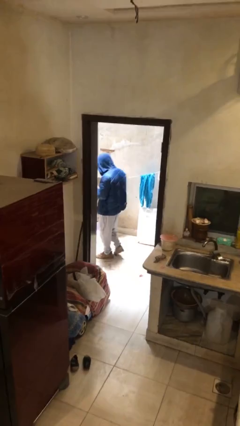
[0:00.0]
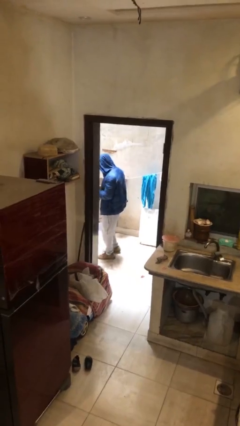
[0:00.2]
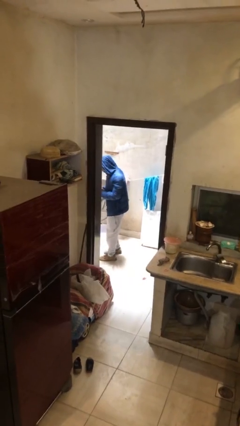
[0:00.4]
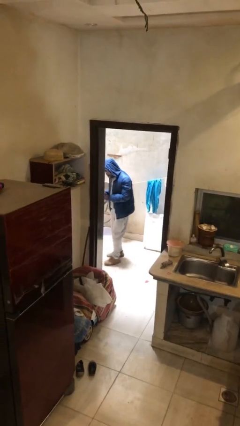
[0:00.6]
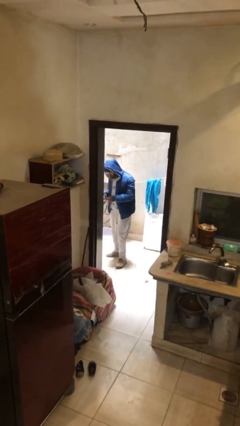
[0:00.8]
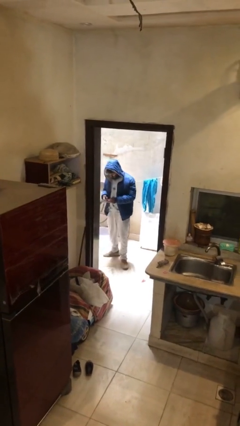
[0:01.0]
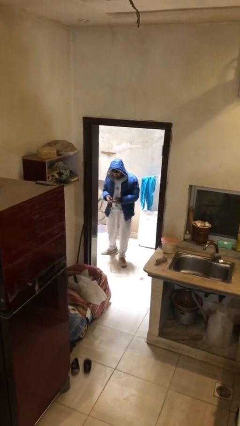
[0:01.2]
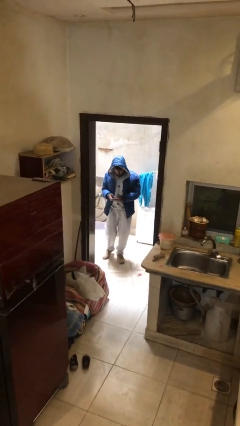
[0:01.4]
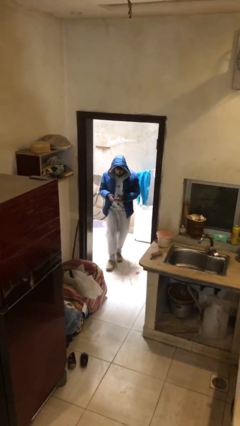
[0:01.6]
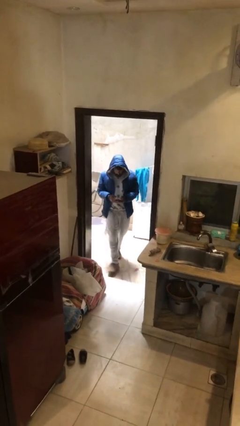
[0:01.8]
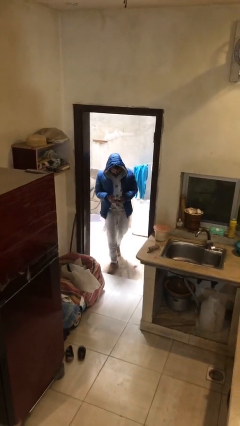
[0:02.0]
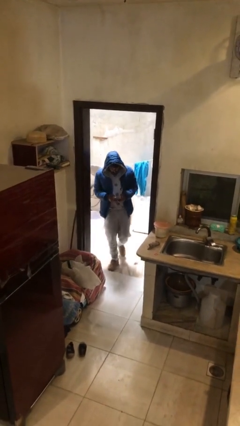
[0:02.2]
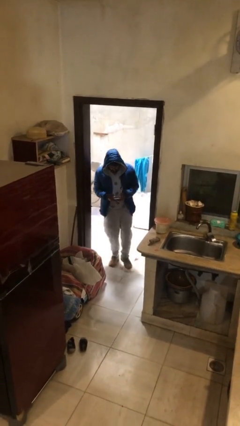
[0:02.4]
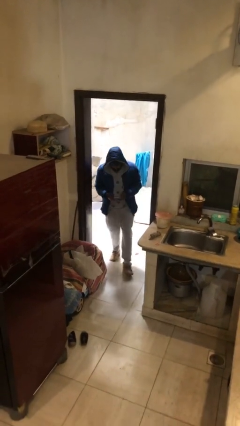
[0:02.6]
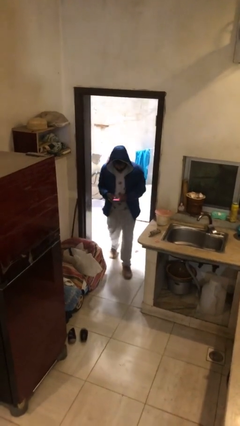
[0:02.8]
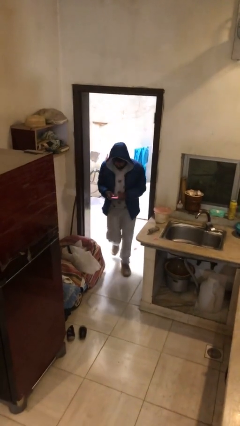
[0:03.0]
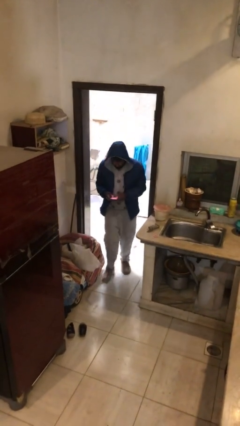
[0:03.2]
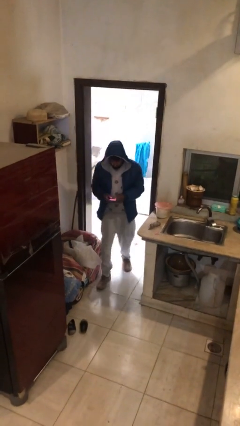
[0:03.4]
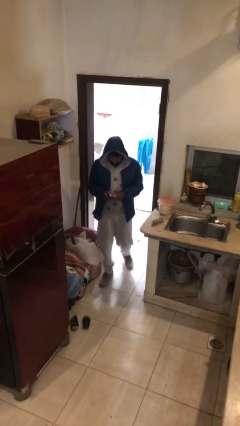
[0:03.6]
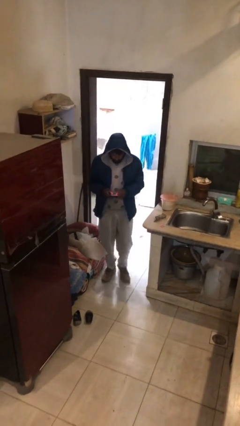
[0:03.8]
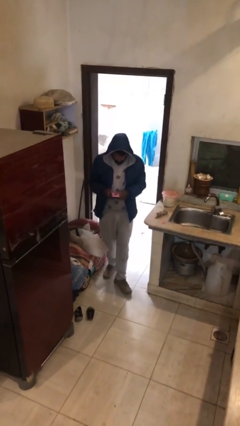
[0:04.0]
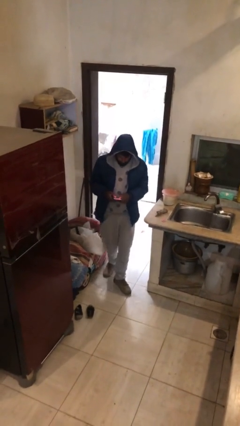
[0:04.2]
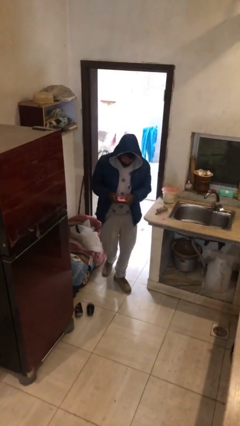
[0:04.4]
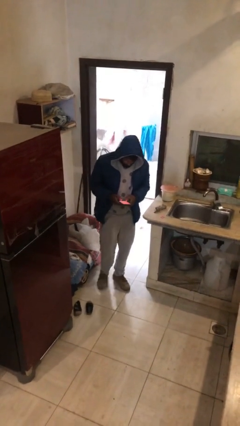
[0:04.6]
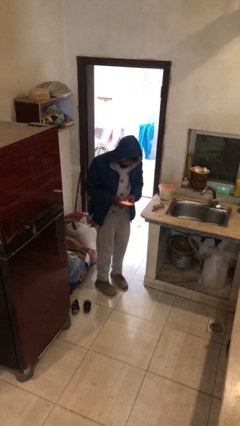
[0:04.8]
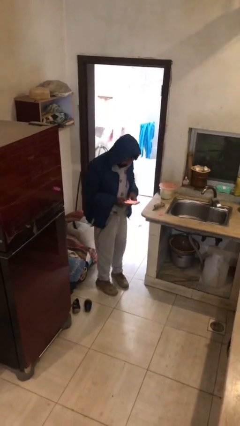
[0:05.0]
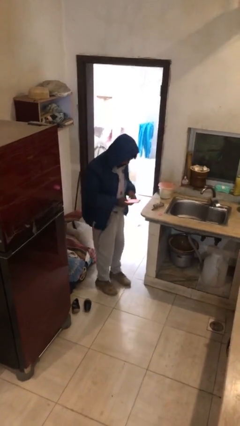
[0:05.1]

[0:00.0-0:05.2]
person enters scene through structure

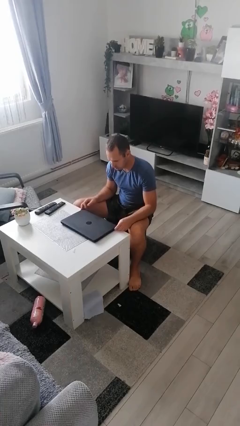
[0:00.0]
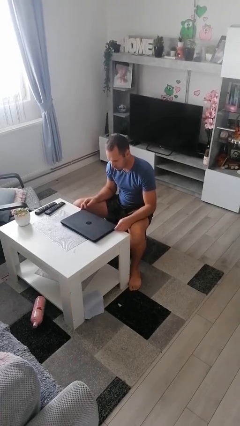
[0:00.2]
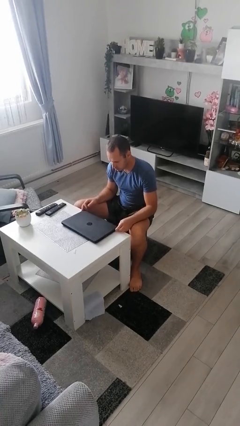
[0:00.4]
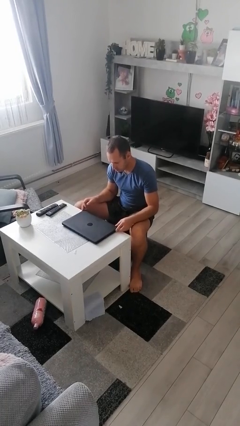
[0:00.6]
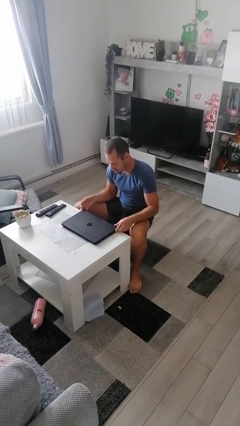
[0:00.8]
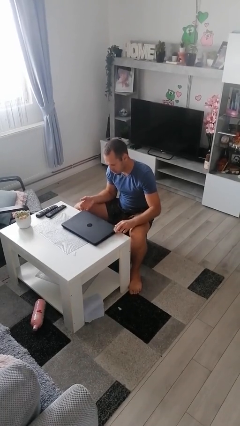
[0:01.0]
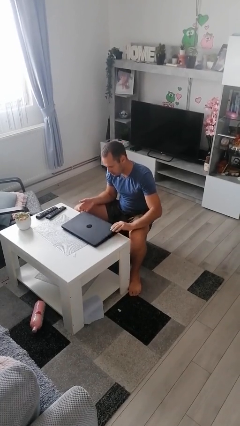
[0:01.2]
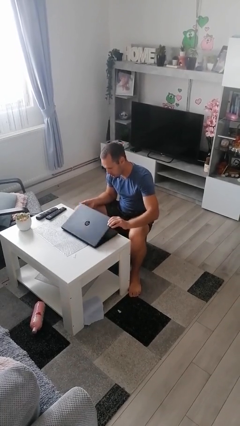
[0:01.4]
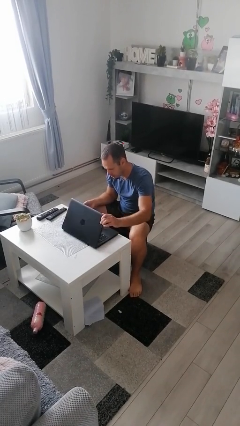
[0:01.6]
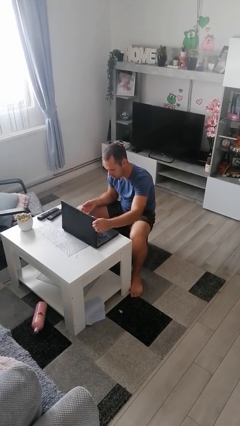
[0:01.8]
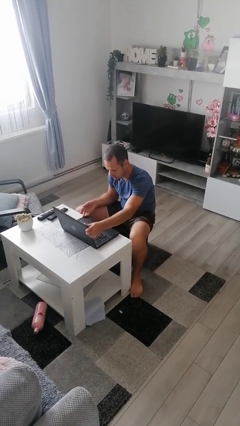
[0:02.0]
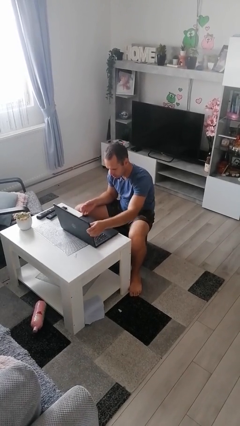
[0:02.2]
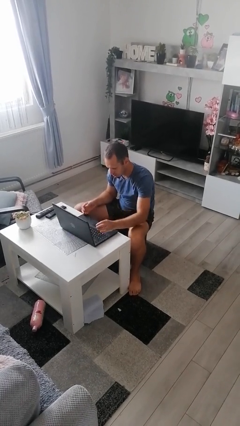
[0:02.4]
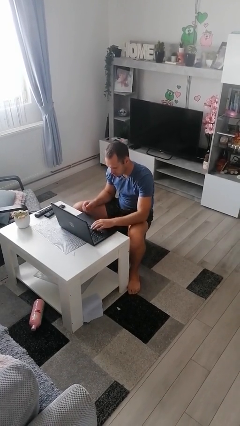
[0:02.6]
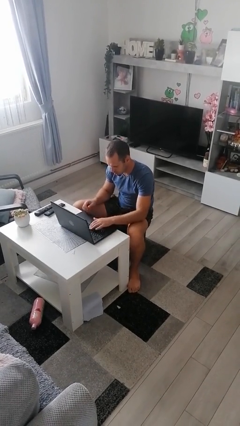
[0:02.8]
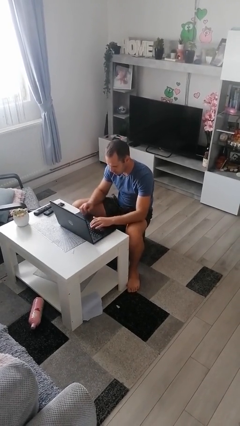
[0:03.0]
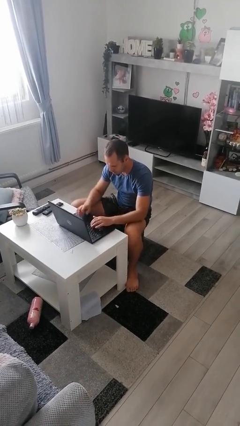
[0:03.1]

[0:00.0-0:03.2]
person opens laptop

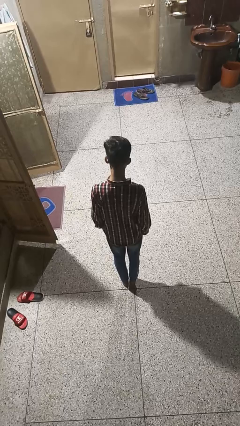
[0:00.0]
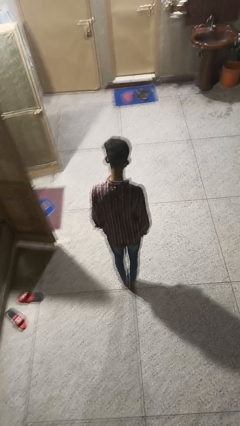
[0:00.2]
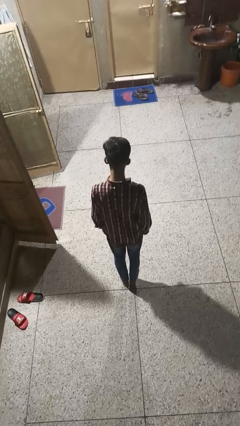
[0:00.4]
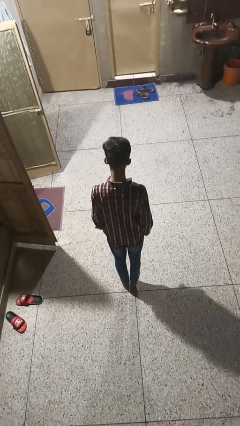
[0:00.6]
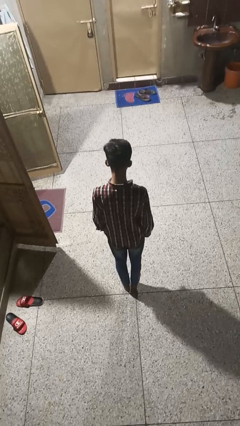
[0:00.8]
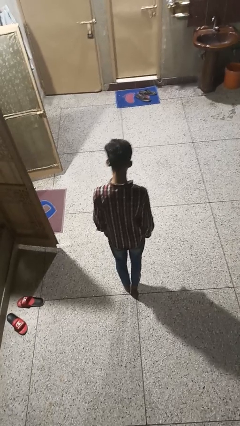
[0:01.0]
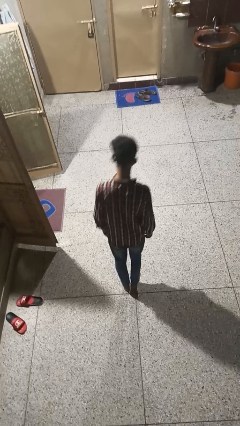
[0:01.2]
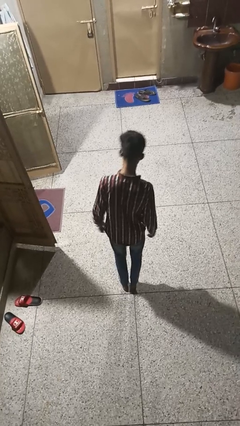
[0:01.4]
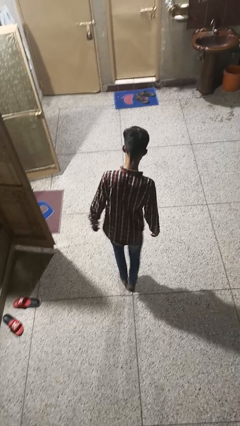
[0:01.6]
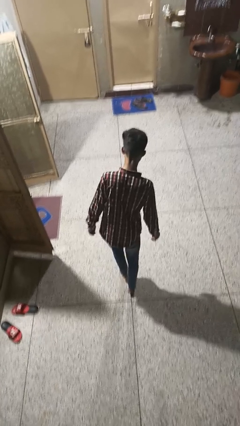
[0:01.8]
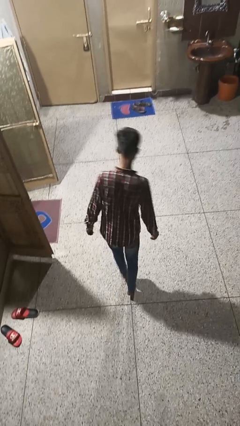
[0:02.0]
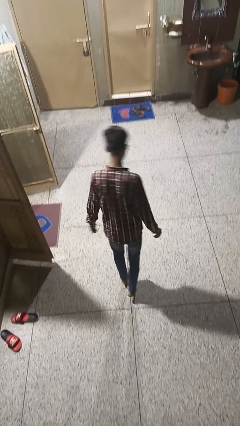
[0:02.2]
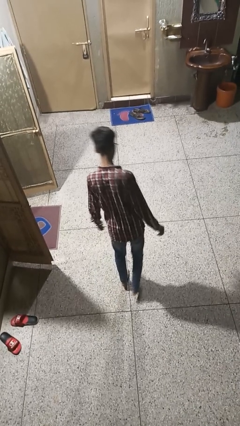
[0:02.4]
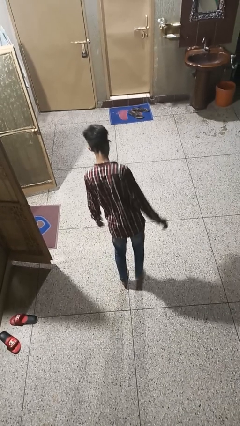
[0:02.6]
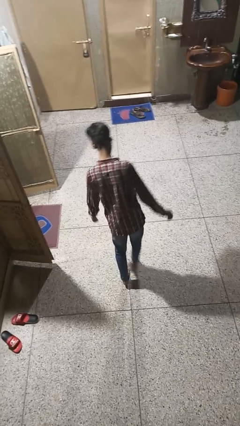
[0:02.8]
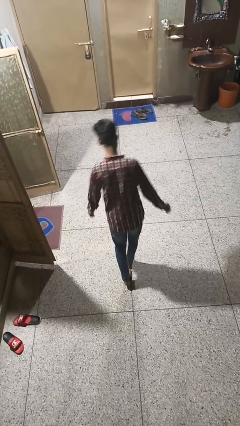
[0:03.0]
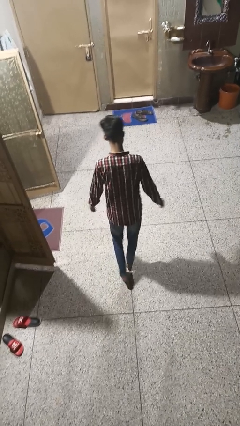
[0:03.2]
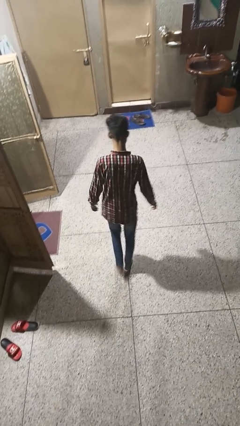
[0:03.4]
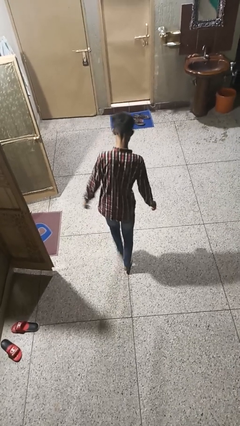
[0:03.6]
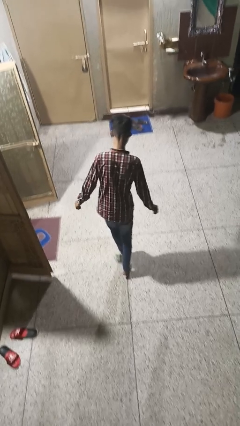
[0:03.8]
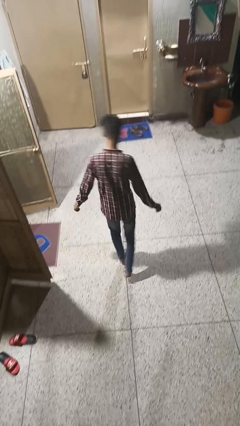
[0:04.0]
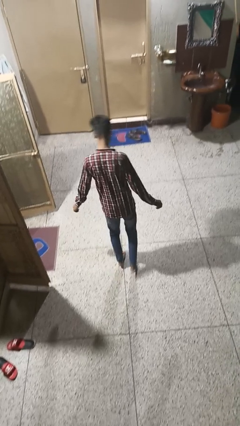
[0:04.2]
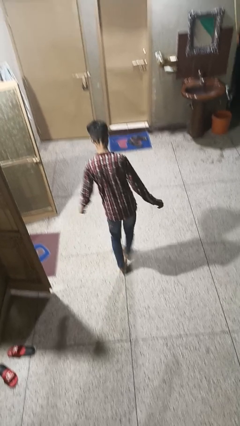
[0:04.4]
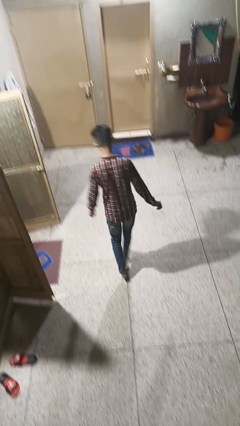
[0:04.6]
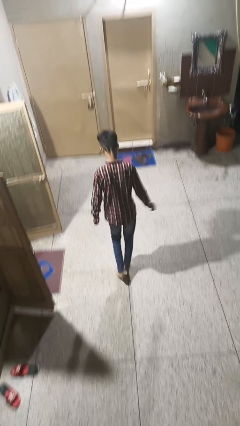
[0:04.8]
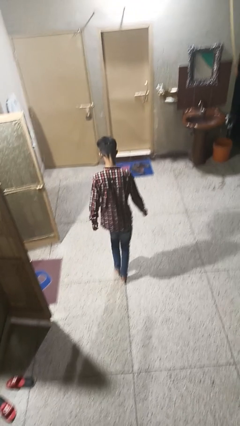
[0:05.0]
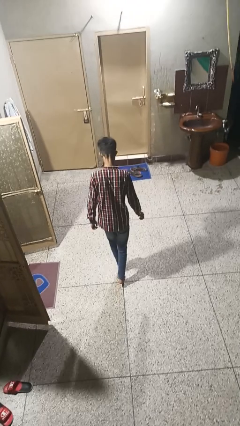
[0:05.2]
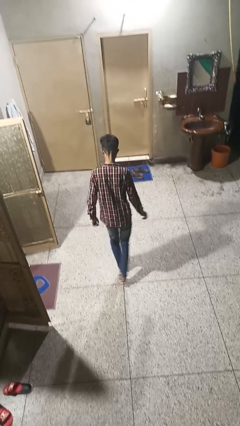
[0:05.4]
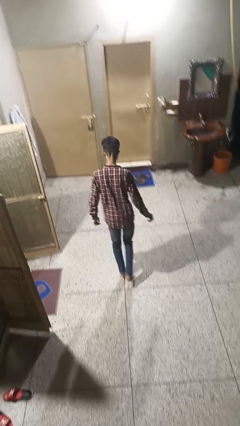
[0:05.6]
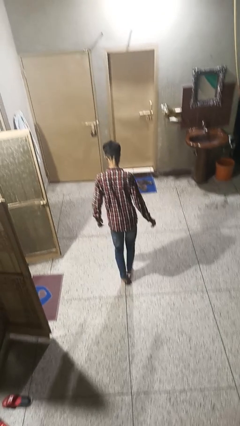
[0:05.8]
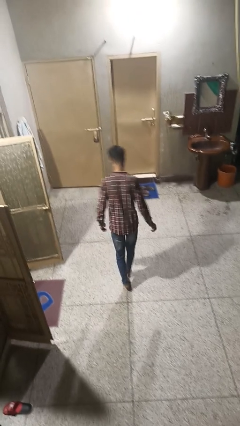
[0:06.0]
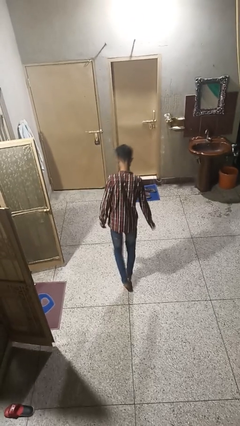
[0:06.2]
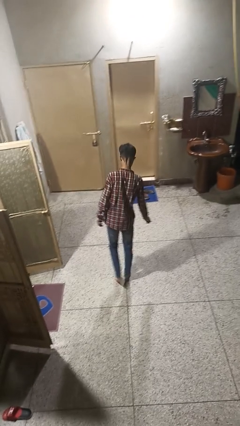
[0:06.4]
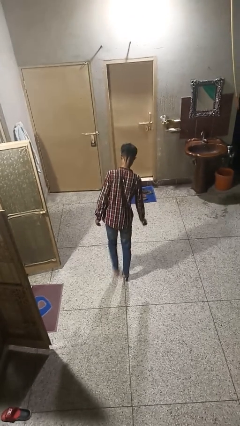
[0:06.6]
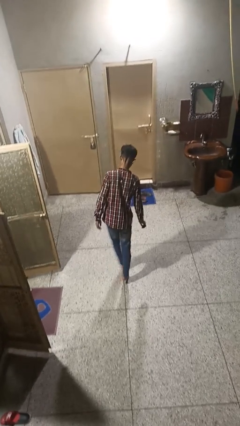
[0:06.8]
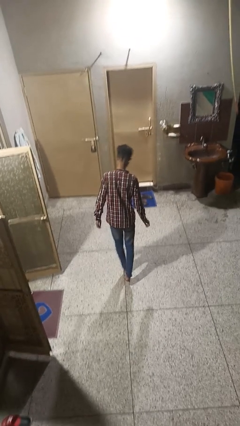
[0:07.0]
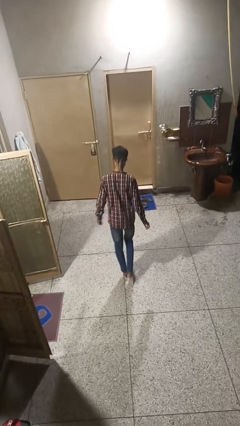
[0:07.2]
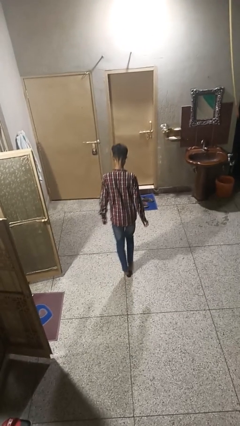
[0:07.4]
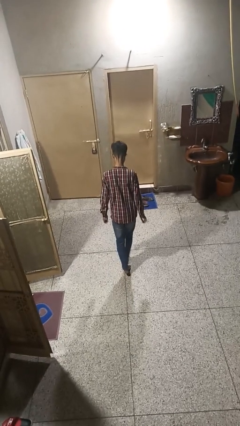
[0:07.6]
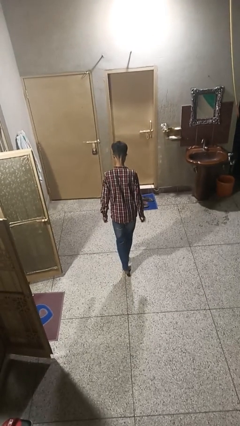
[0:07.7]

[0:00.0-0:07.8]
person walks tiptoe

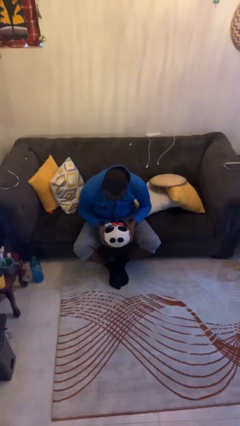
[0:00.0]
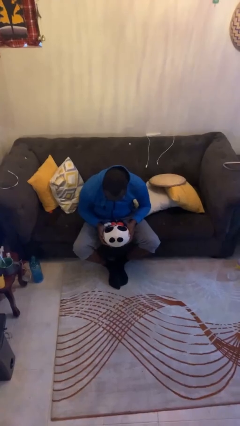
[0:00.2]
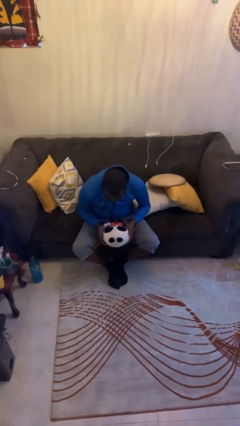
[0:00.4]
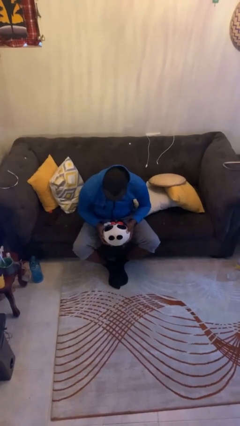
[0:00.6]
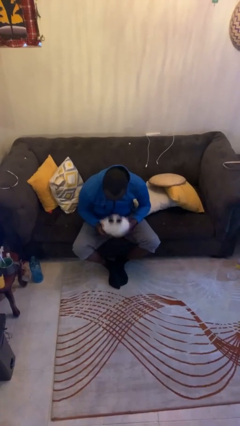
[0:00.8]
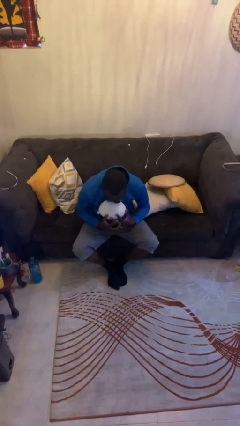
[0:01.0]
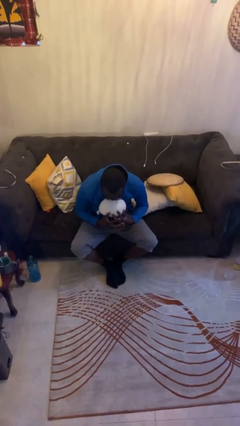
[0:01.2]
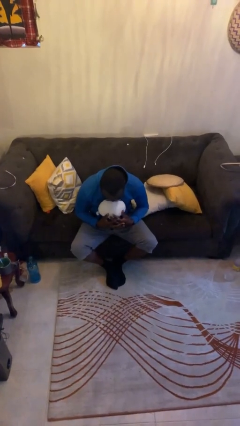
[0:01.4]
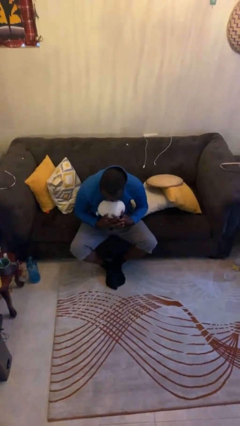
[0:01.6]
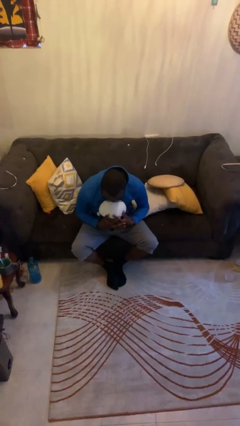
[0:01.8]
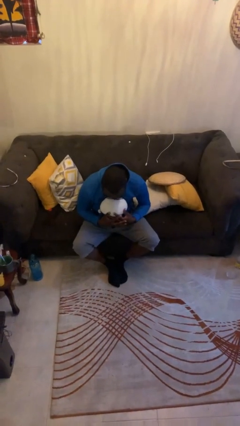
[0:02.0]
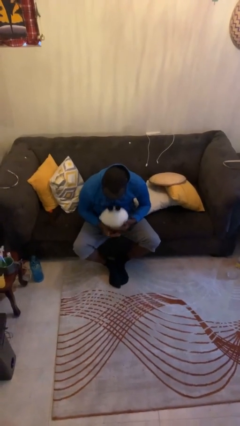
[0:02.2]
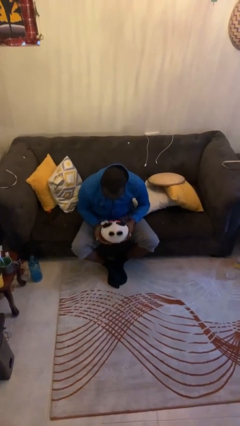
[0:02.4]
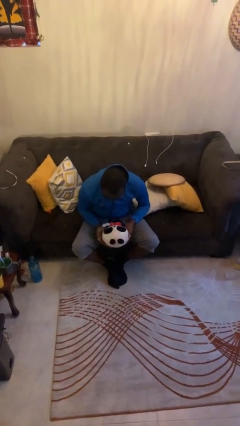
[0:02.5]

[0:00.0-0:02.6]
person hugs stuffed animal
